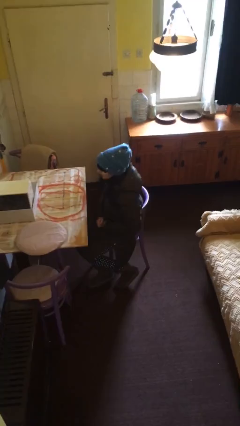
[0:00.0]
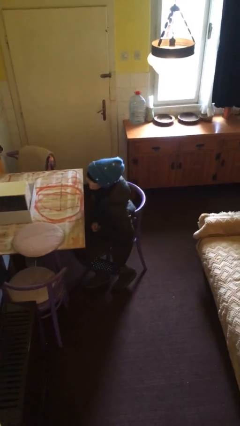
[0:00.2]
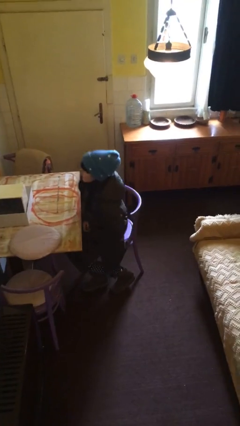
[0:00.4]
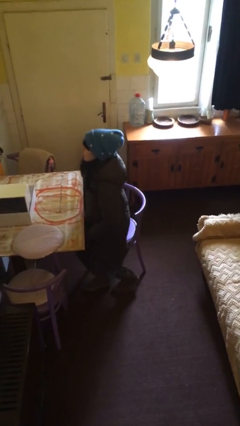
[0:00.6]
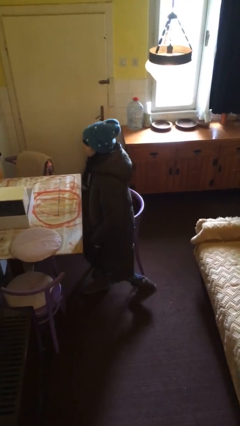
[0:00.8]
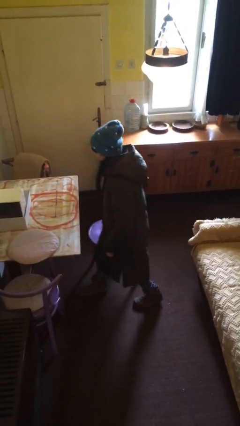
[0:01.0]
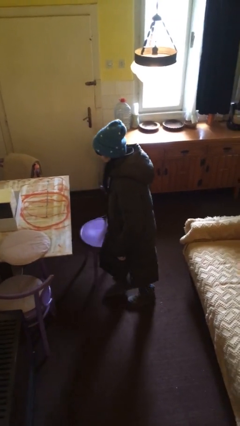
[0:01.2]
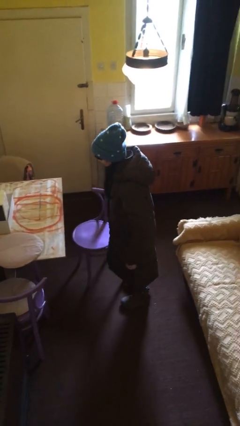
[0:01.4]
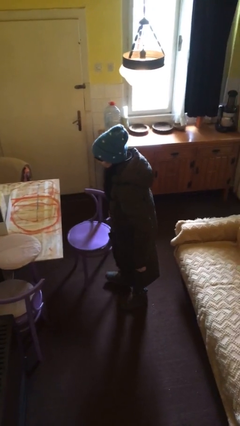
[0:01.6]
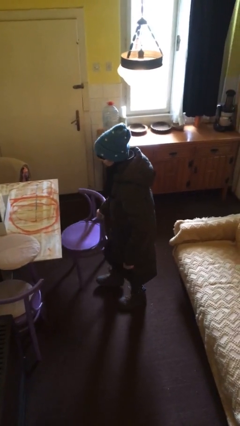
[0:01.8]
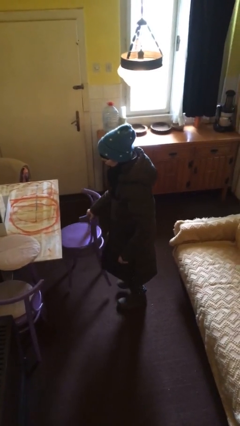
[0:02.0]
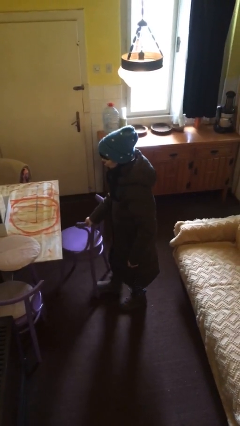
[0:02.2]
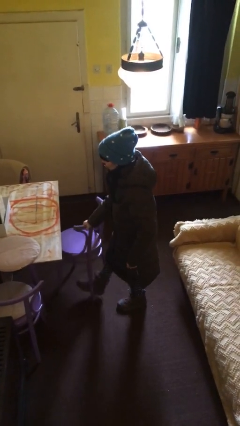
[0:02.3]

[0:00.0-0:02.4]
person stands up

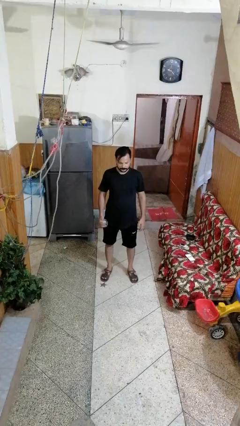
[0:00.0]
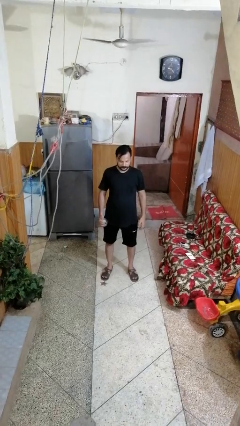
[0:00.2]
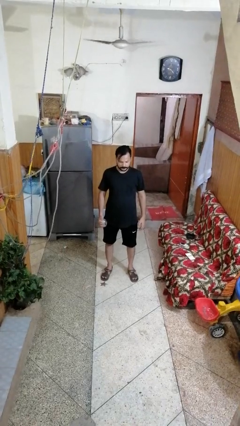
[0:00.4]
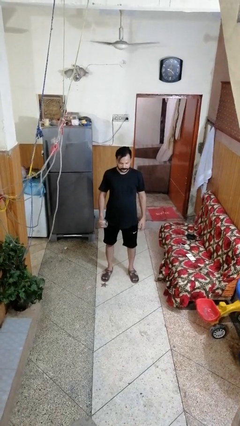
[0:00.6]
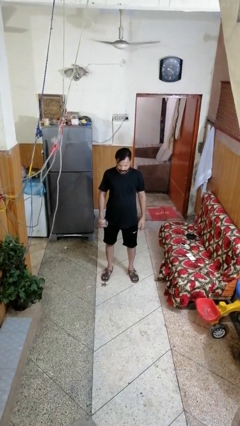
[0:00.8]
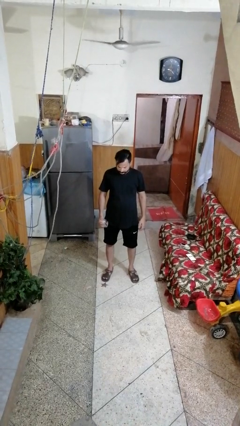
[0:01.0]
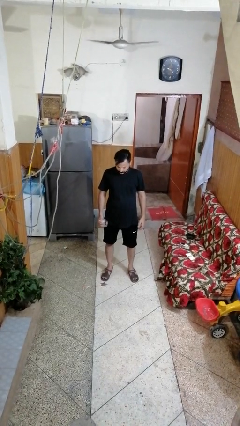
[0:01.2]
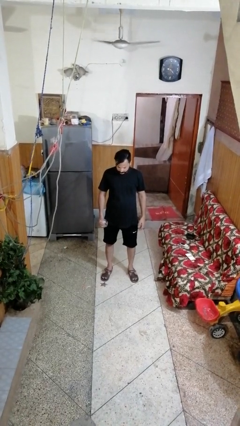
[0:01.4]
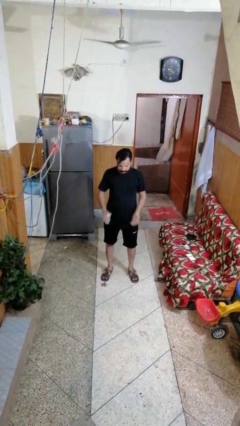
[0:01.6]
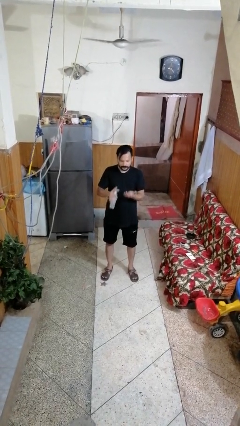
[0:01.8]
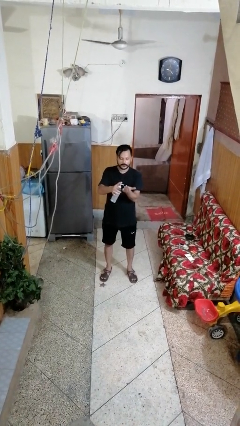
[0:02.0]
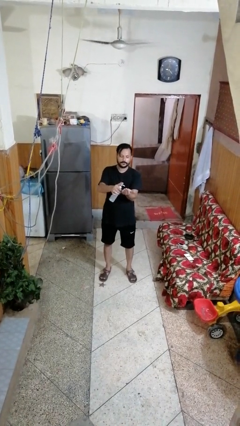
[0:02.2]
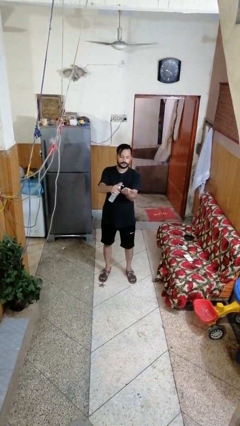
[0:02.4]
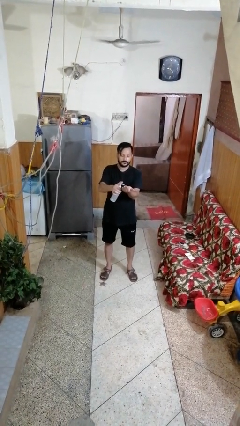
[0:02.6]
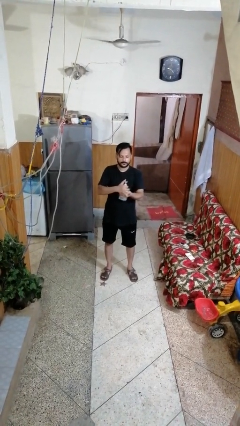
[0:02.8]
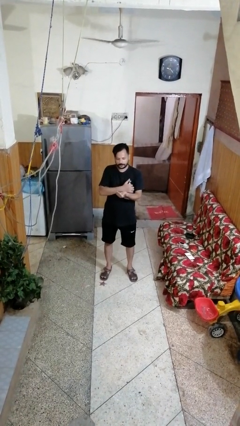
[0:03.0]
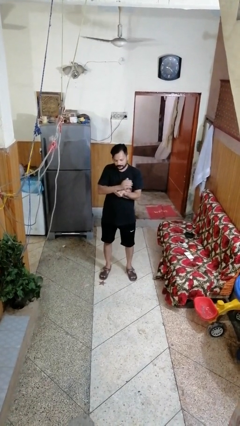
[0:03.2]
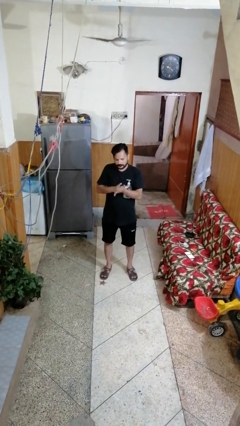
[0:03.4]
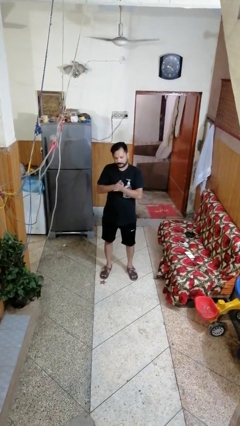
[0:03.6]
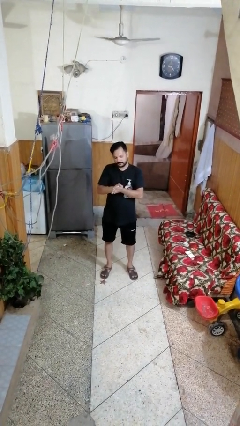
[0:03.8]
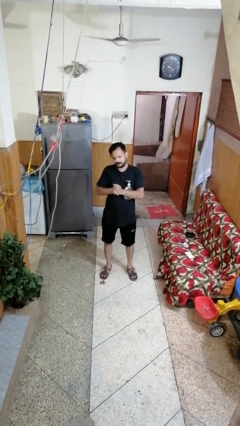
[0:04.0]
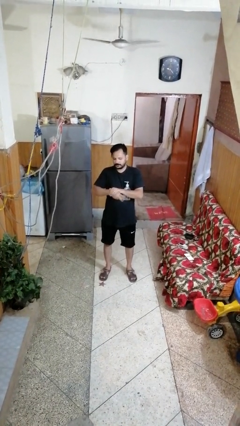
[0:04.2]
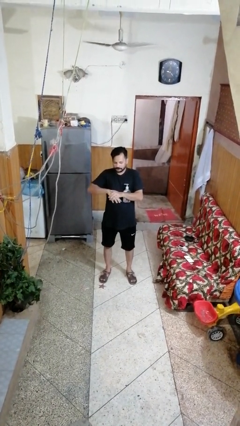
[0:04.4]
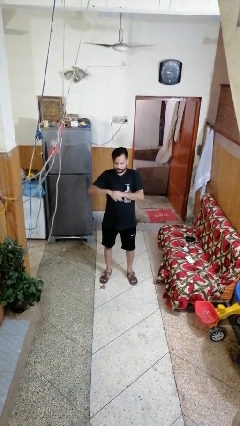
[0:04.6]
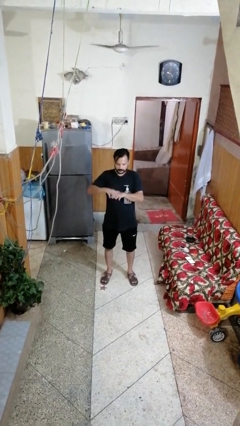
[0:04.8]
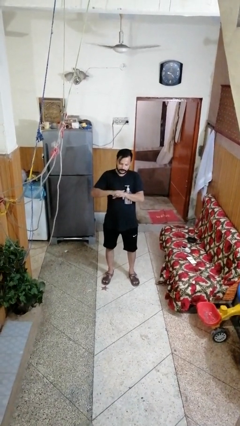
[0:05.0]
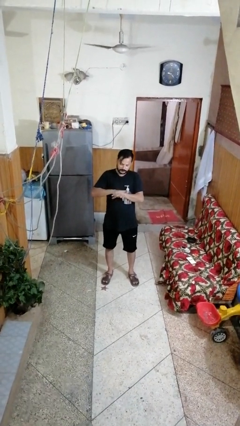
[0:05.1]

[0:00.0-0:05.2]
person applies sunscreen

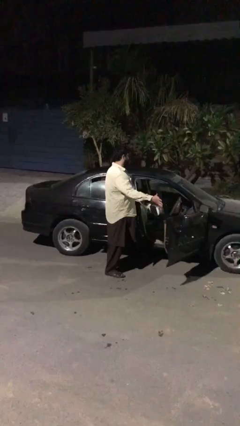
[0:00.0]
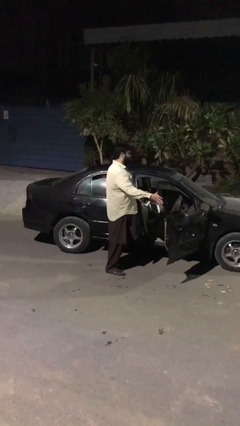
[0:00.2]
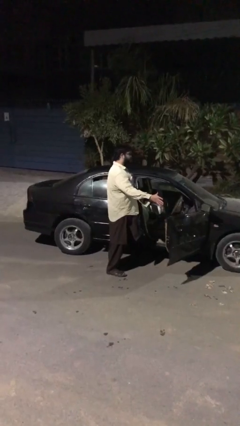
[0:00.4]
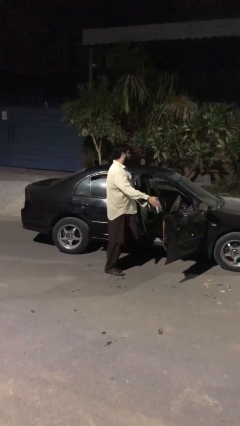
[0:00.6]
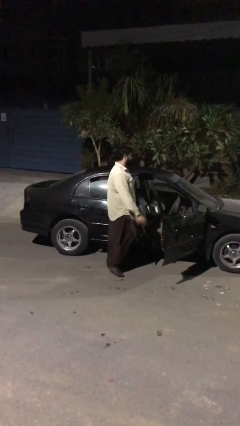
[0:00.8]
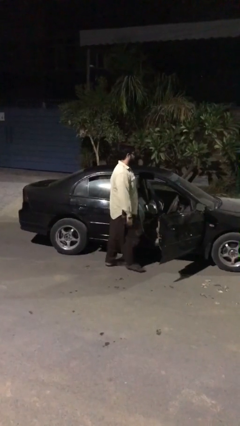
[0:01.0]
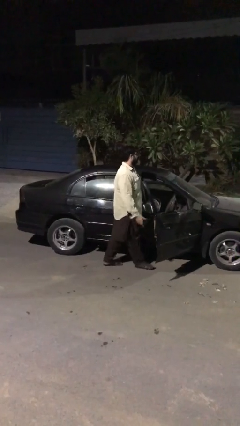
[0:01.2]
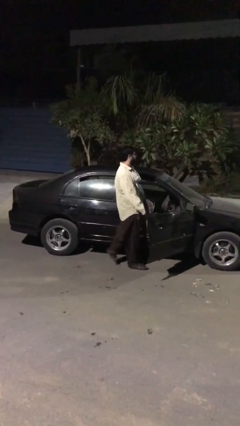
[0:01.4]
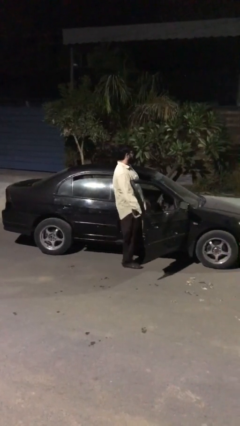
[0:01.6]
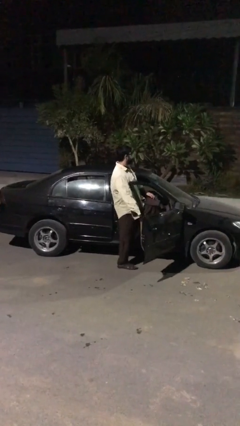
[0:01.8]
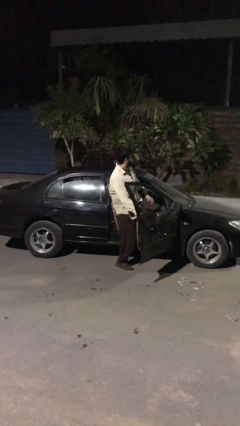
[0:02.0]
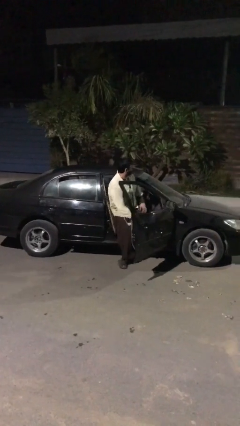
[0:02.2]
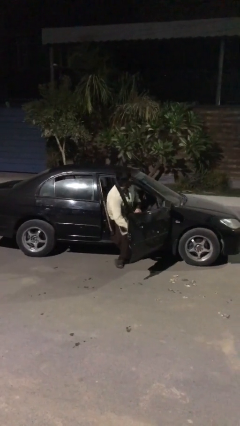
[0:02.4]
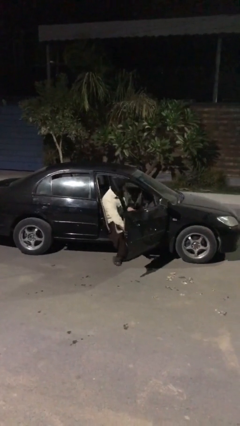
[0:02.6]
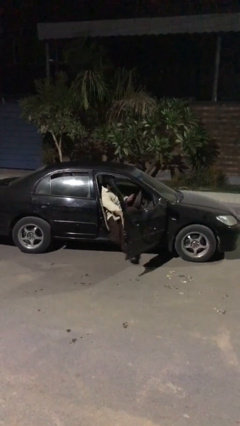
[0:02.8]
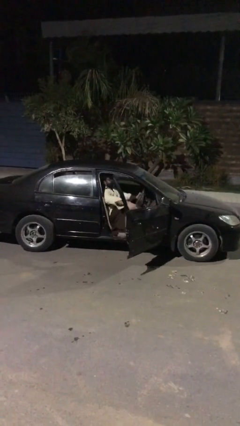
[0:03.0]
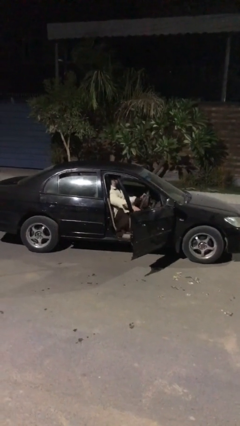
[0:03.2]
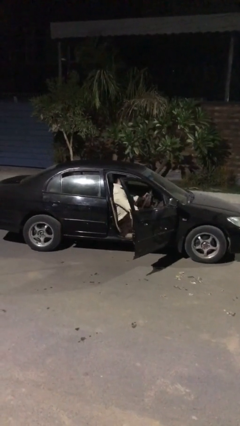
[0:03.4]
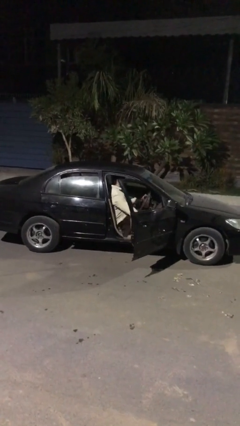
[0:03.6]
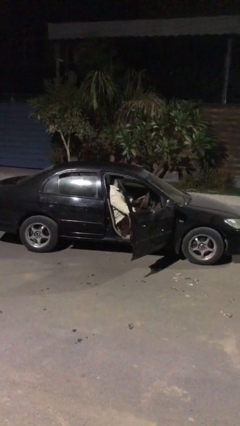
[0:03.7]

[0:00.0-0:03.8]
person enters car

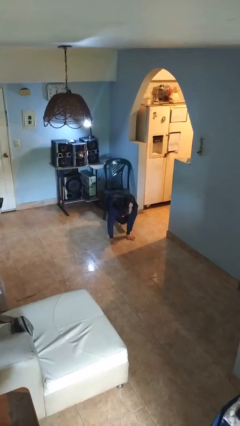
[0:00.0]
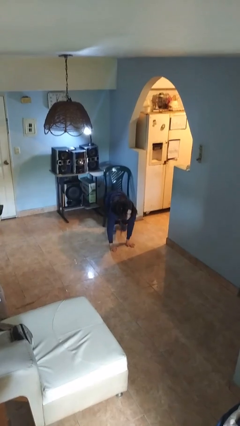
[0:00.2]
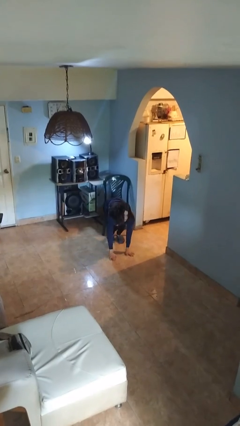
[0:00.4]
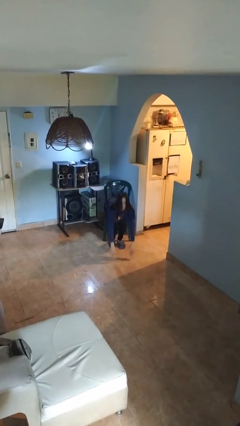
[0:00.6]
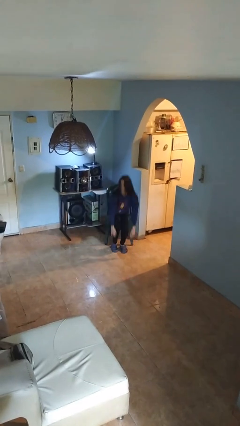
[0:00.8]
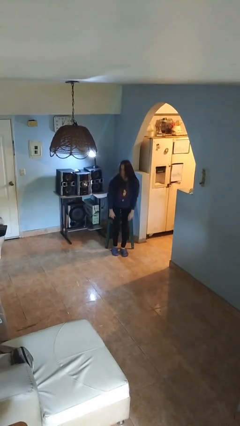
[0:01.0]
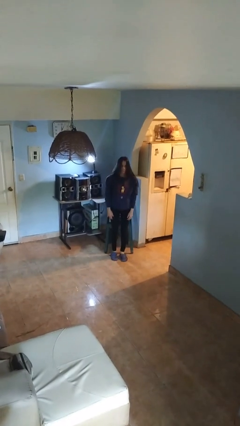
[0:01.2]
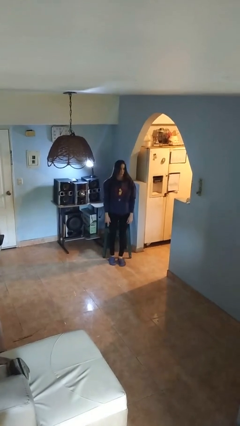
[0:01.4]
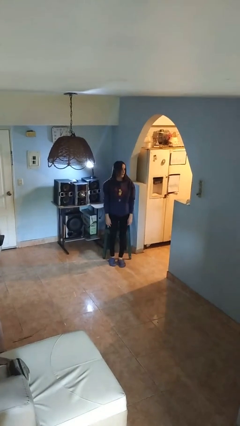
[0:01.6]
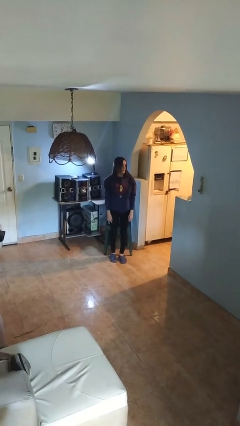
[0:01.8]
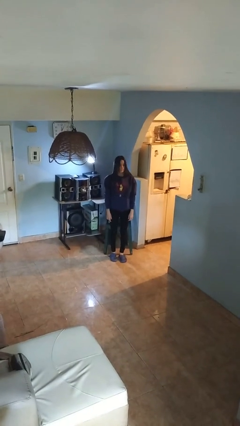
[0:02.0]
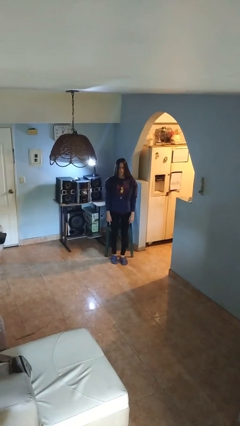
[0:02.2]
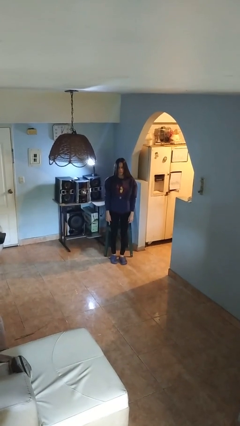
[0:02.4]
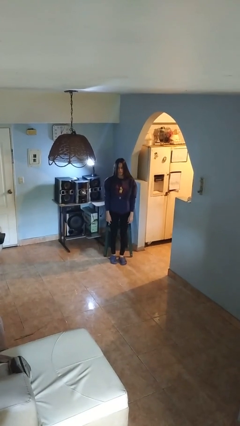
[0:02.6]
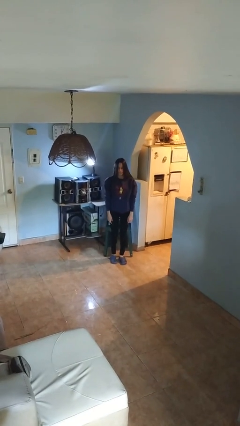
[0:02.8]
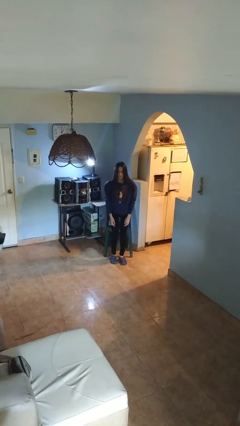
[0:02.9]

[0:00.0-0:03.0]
person stands up from floor

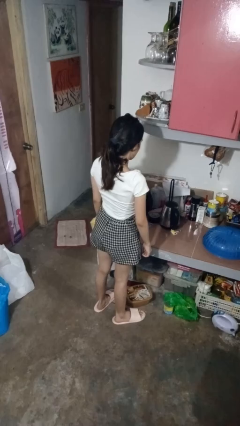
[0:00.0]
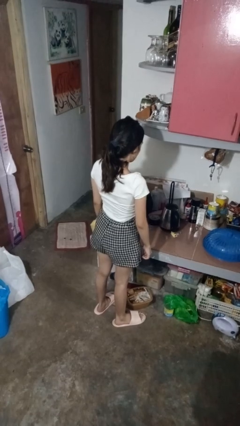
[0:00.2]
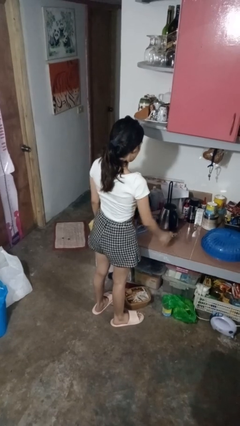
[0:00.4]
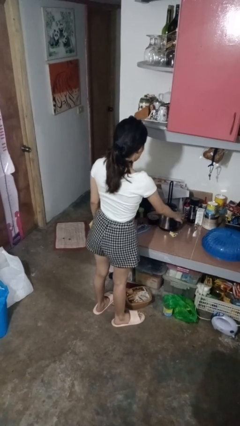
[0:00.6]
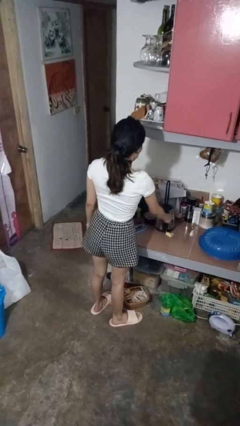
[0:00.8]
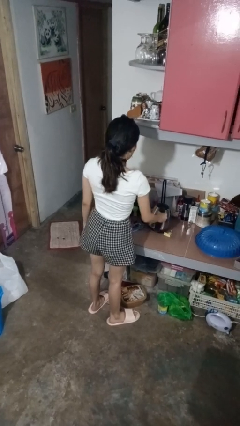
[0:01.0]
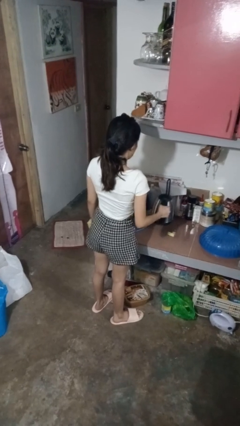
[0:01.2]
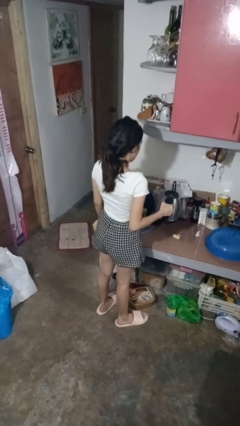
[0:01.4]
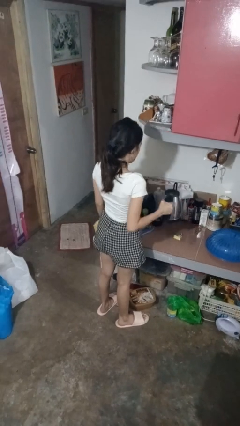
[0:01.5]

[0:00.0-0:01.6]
person picks up object from countertop

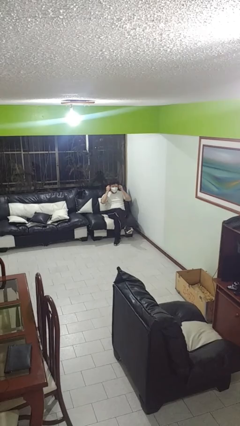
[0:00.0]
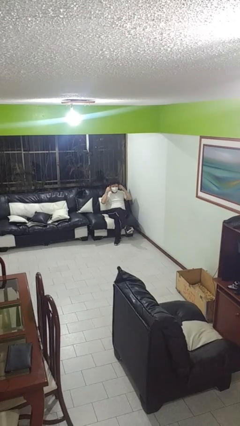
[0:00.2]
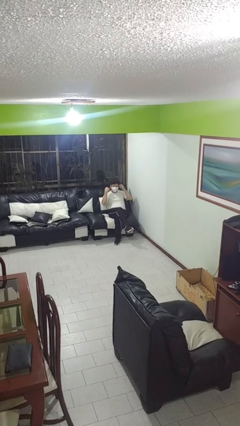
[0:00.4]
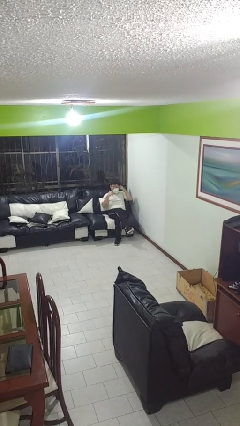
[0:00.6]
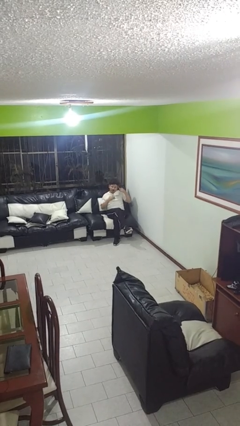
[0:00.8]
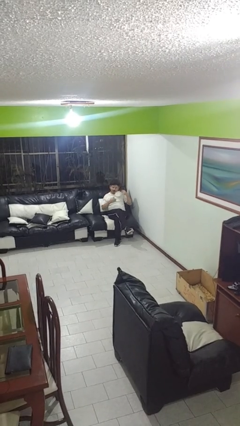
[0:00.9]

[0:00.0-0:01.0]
person takes off facemask

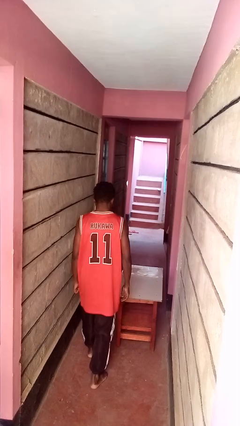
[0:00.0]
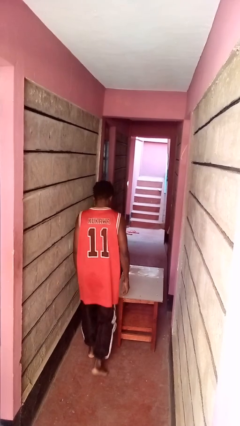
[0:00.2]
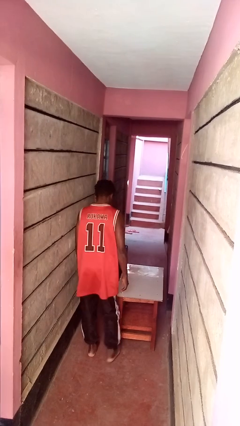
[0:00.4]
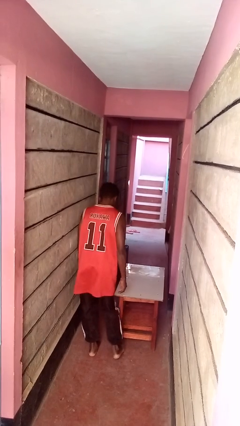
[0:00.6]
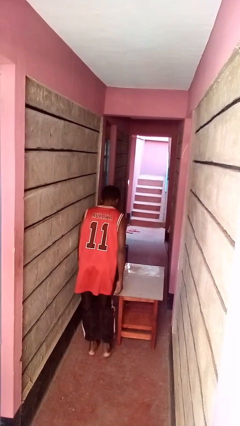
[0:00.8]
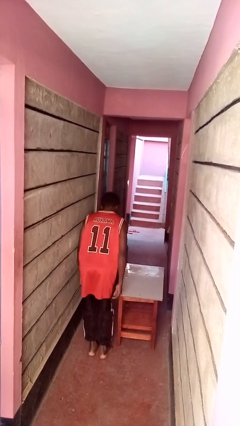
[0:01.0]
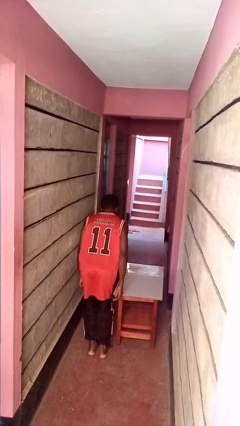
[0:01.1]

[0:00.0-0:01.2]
person stubs toe
